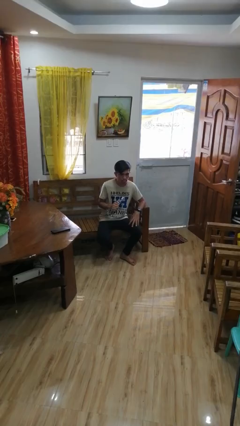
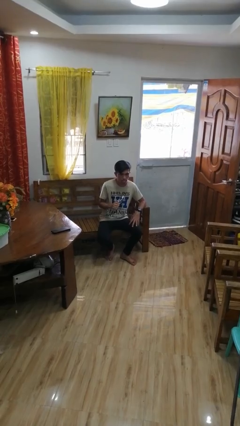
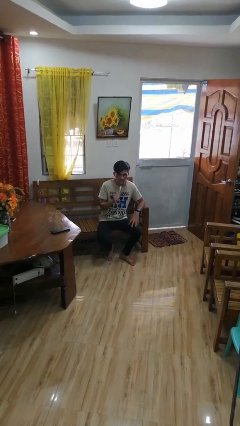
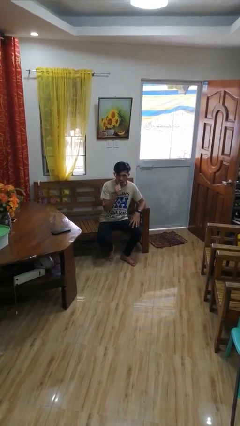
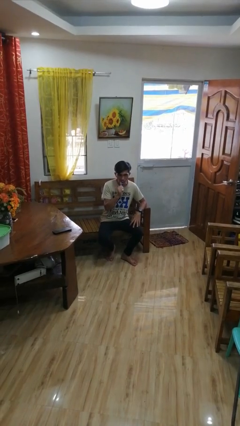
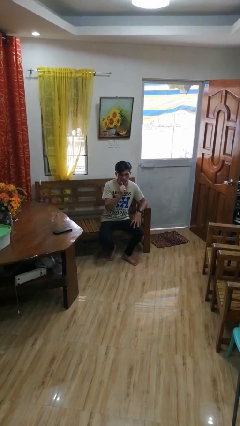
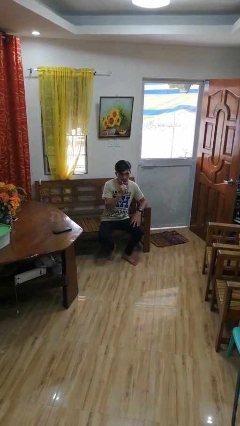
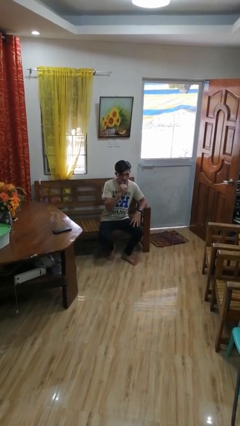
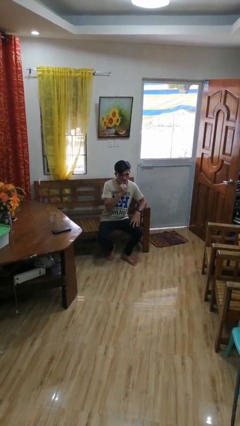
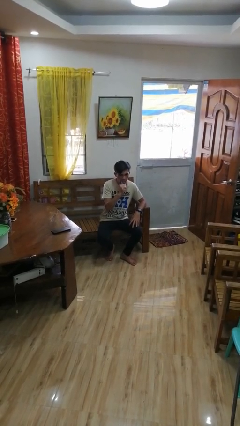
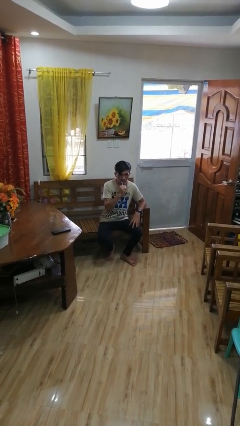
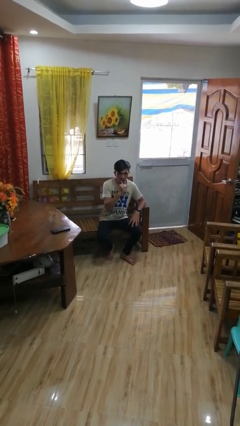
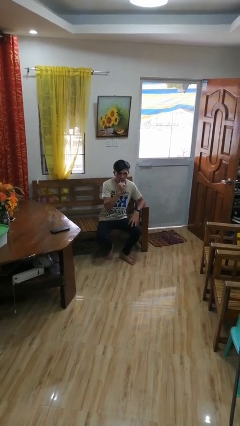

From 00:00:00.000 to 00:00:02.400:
person brushes teeth

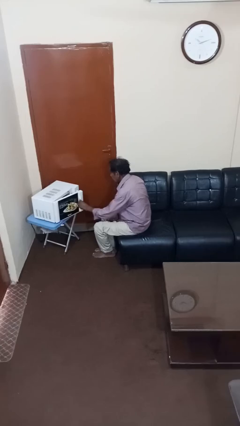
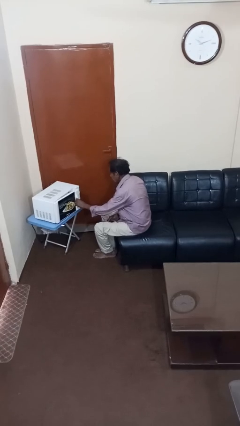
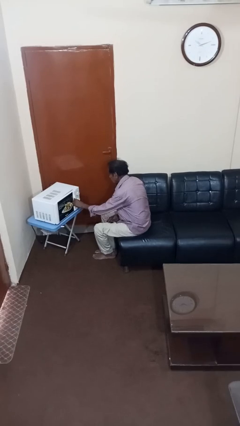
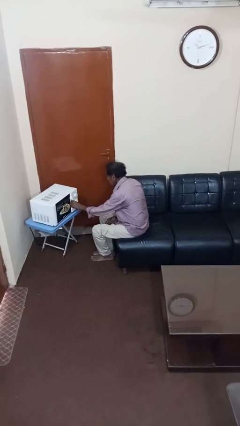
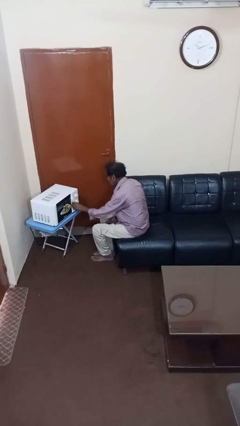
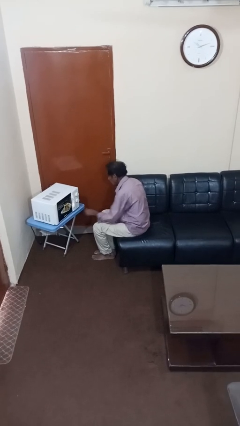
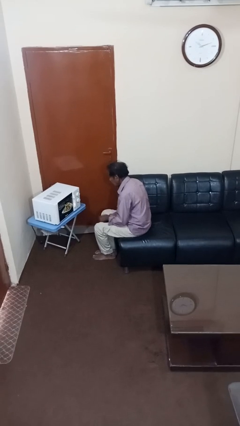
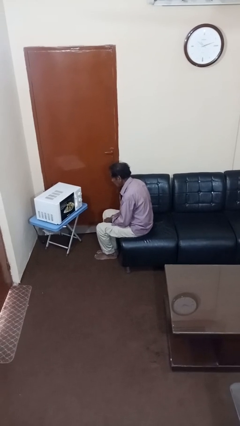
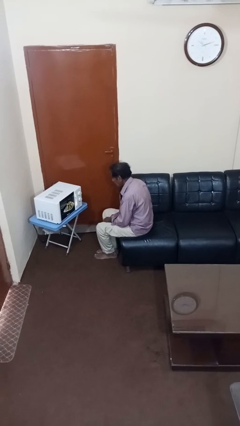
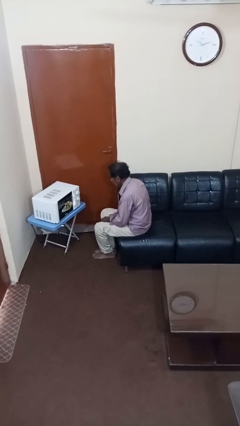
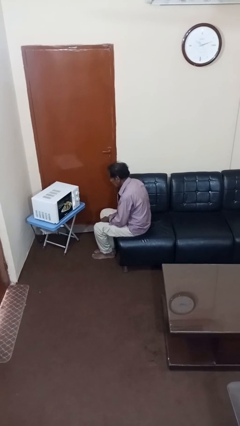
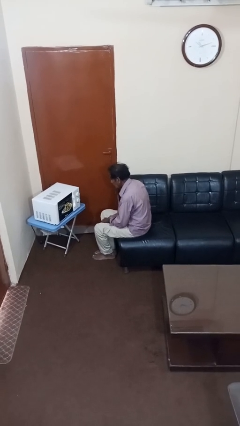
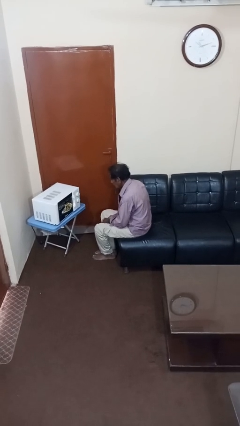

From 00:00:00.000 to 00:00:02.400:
person closes microwave

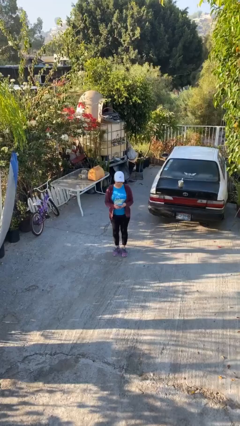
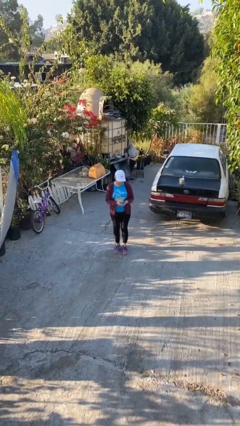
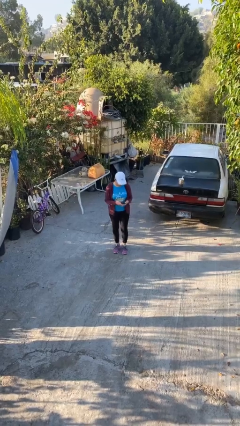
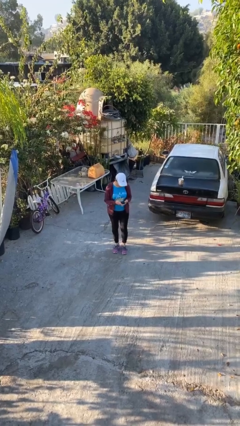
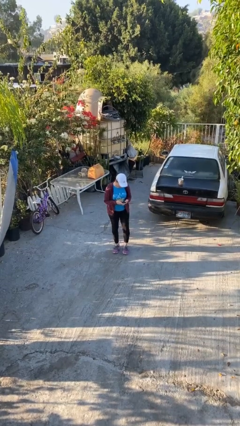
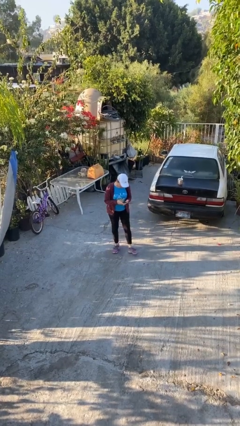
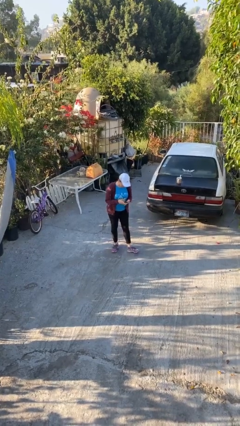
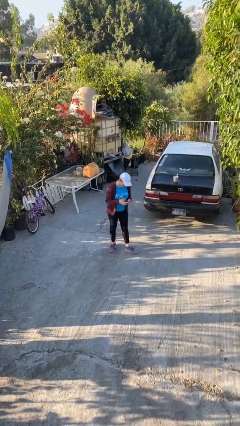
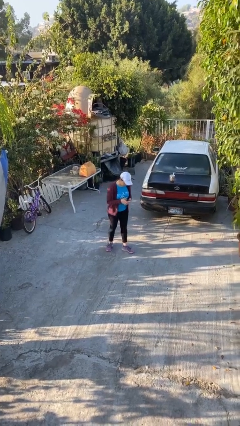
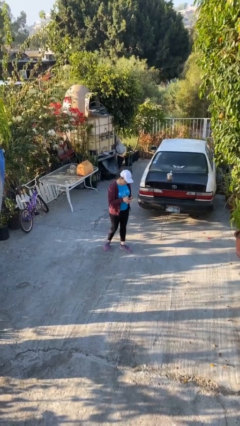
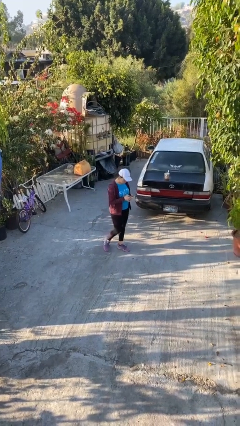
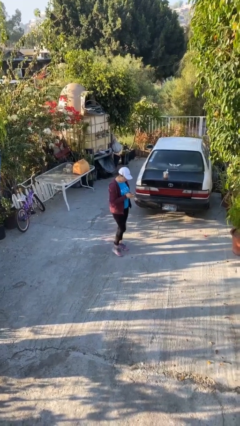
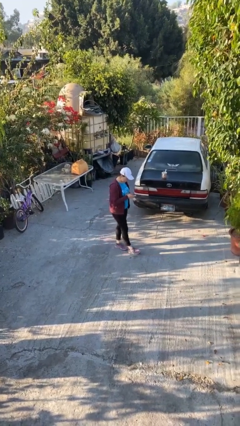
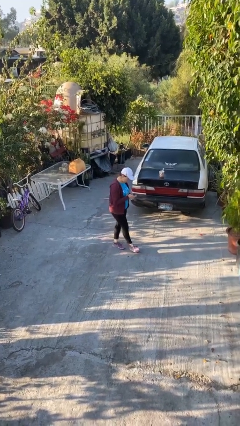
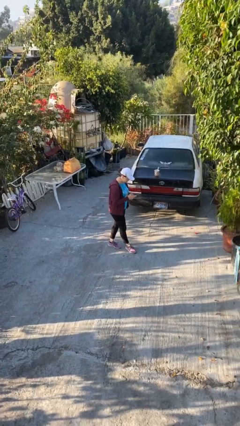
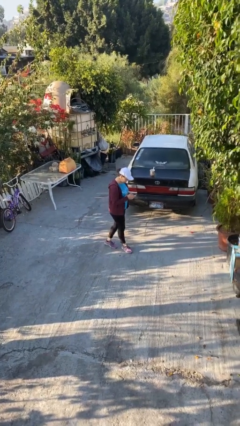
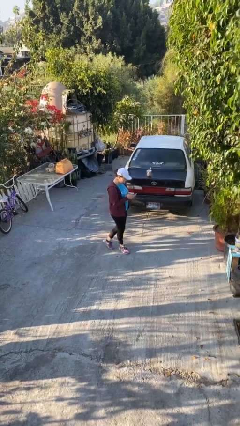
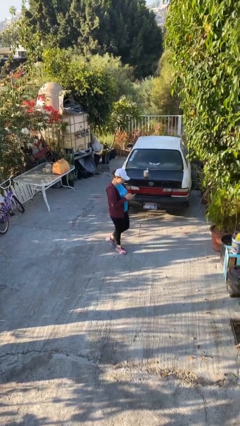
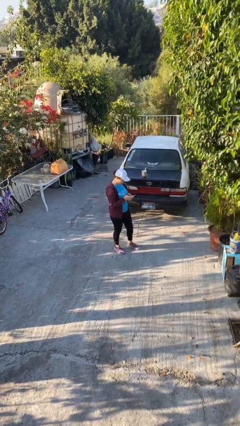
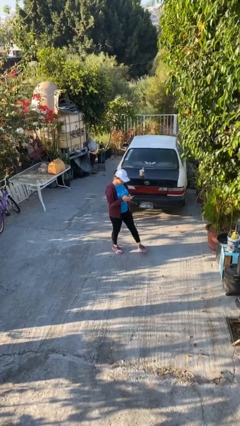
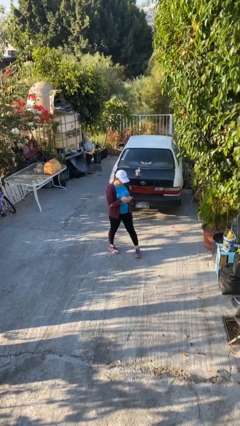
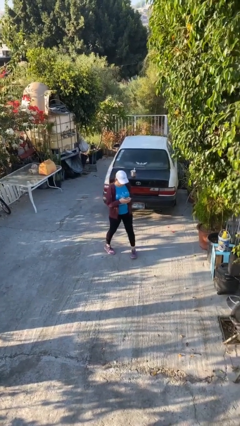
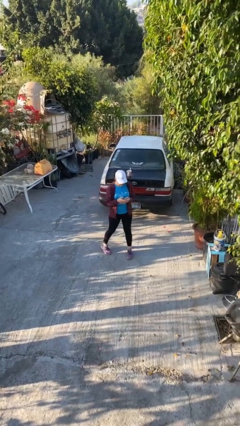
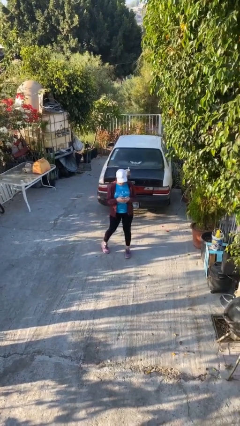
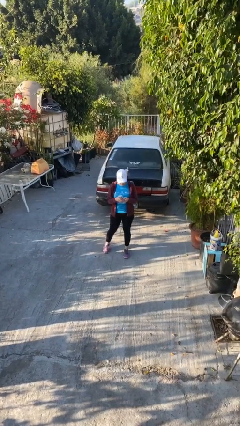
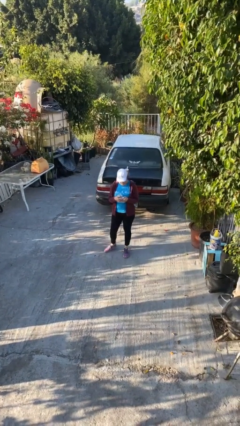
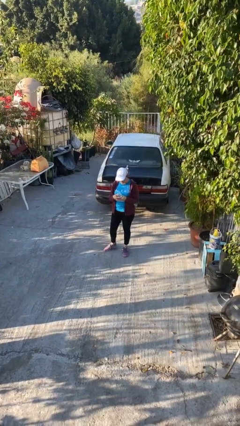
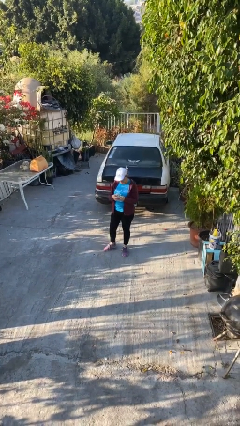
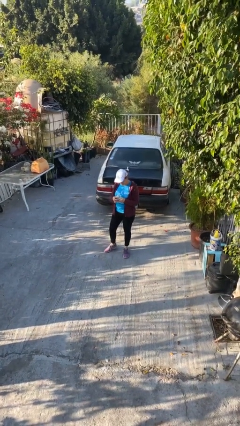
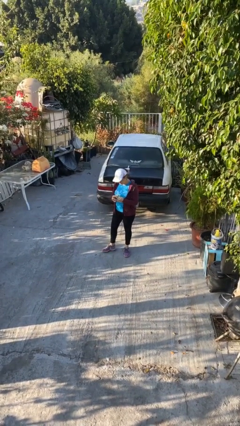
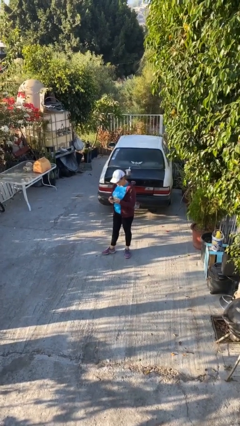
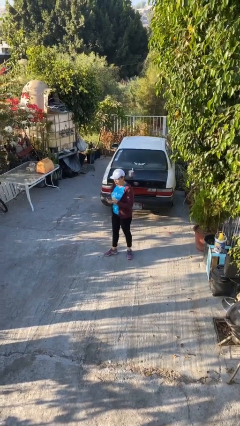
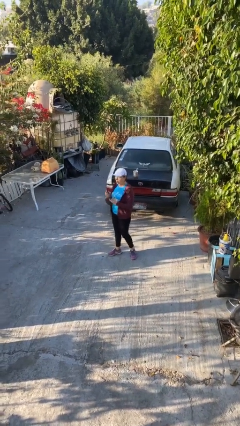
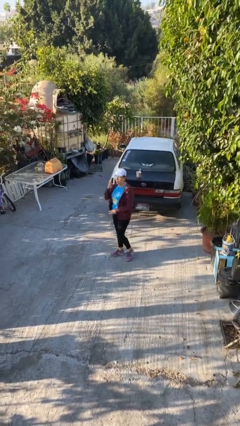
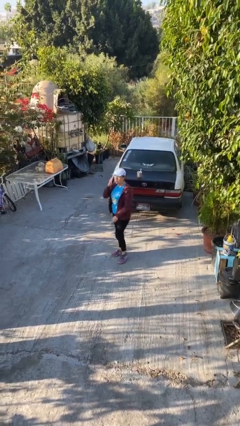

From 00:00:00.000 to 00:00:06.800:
person texts on phone

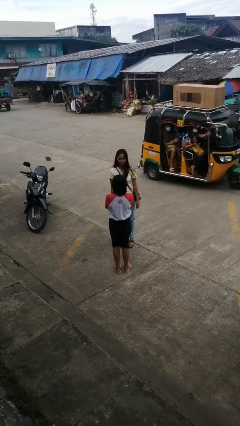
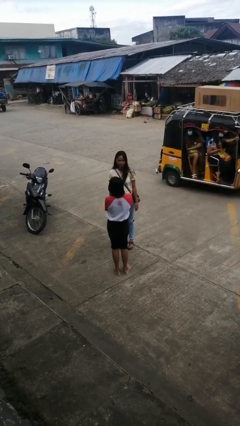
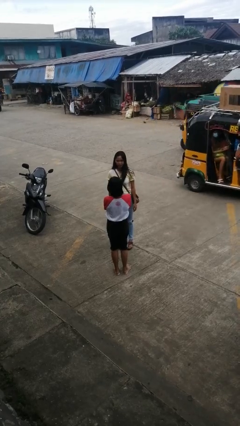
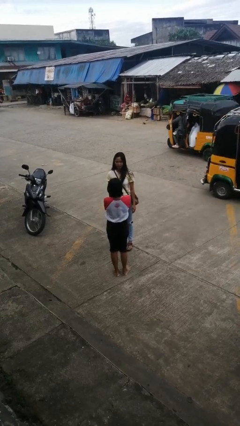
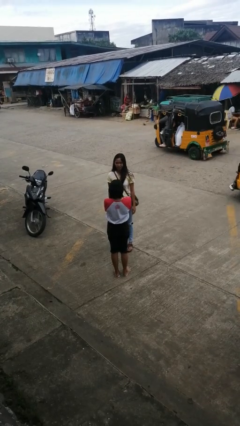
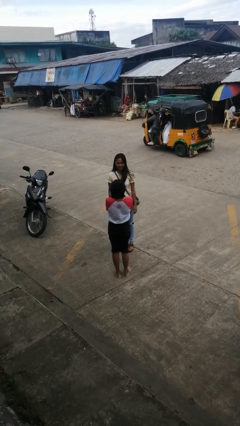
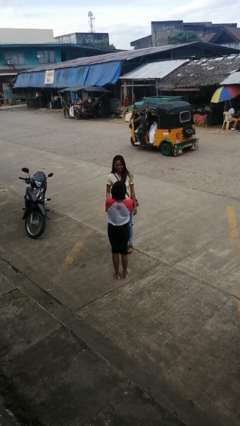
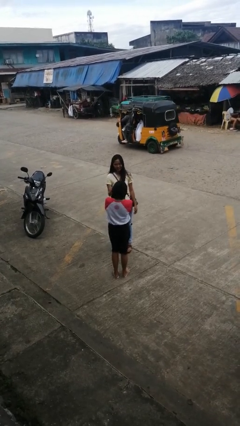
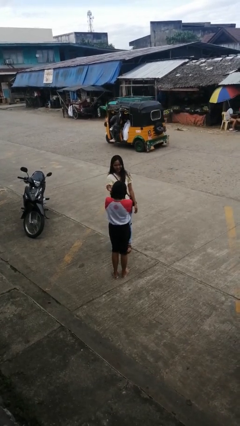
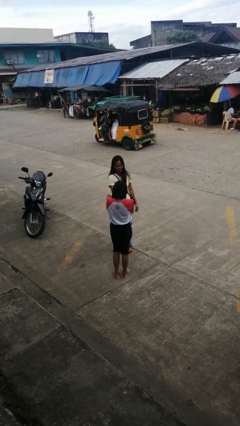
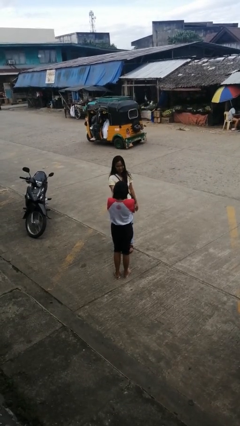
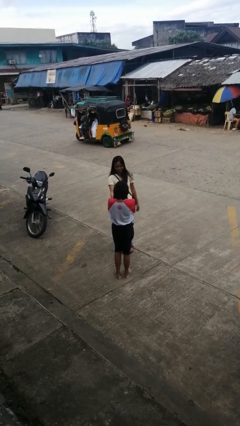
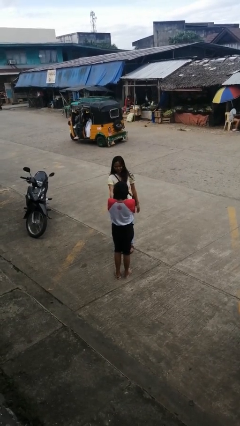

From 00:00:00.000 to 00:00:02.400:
person laughs with person

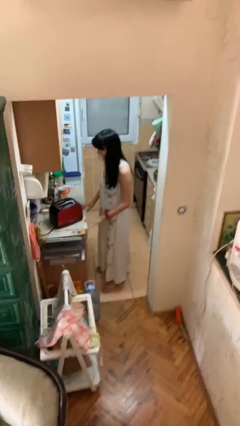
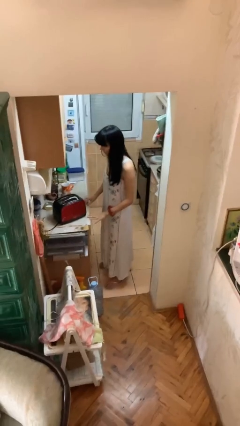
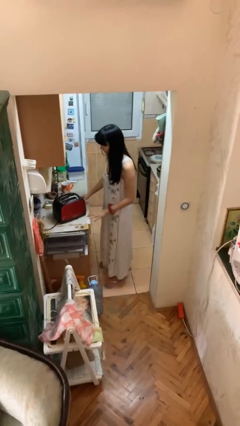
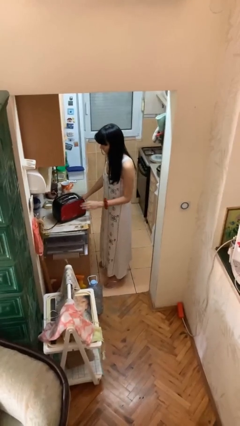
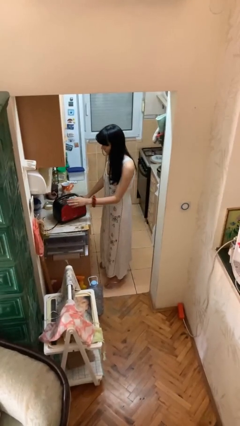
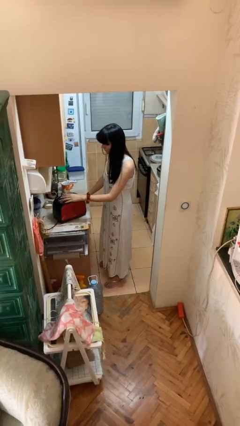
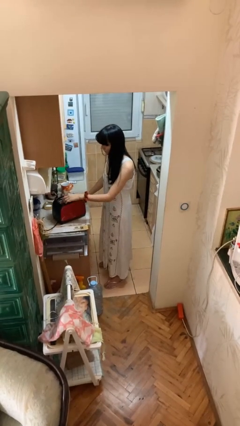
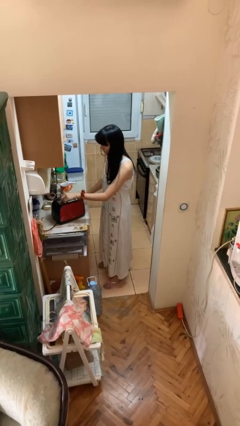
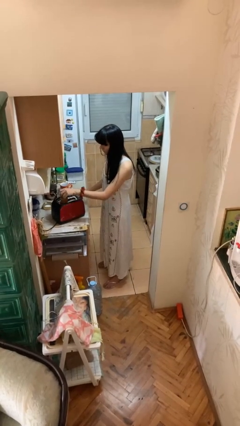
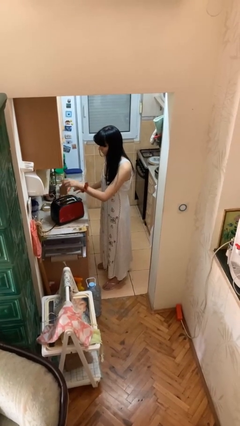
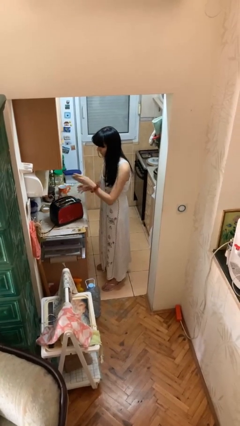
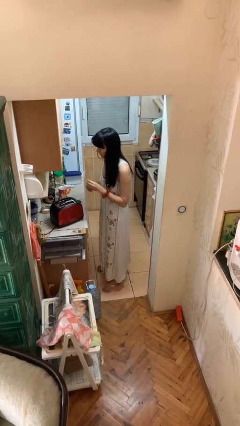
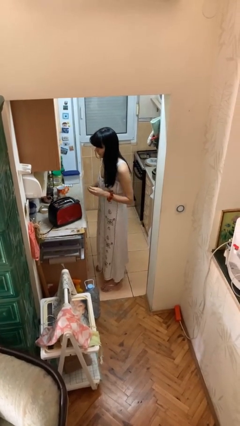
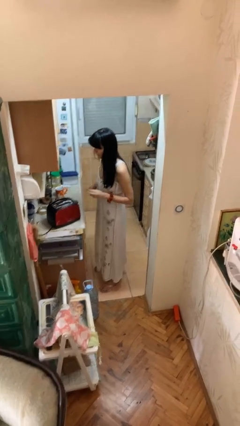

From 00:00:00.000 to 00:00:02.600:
person takes object from toaster

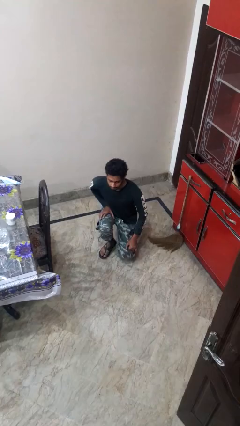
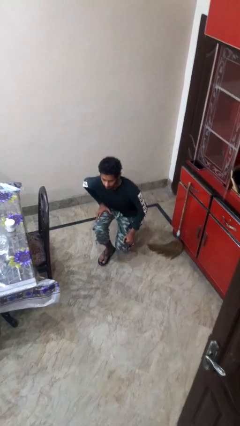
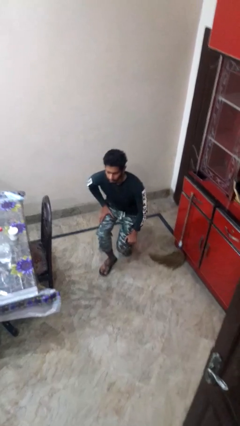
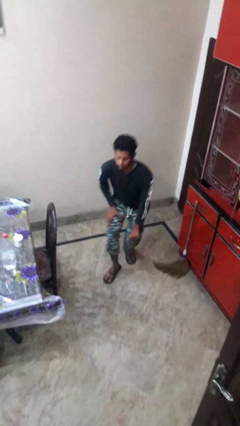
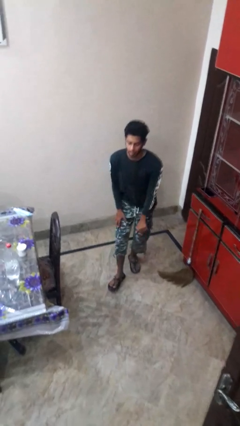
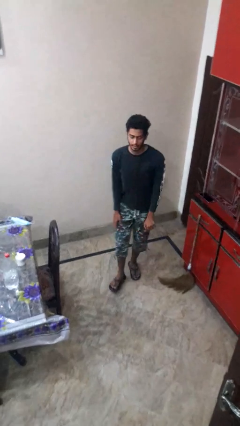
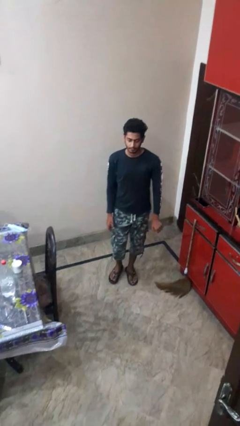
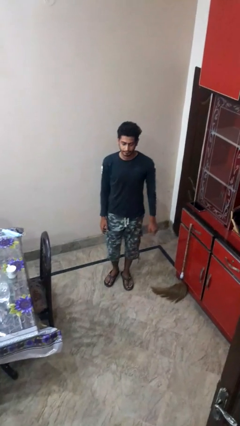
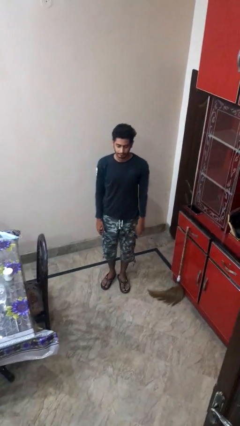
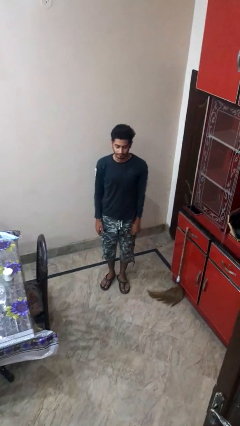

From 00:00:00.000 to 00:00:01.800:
person stands up from floor
